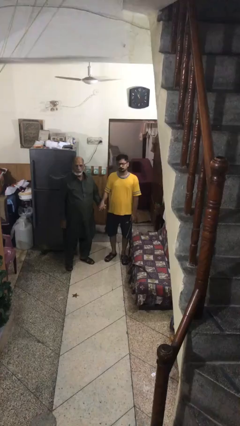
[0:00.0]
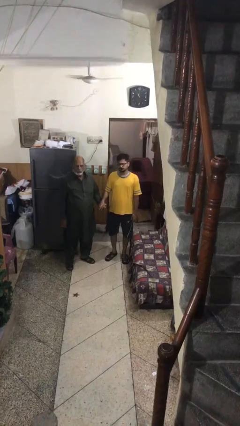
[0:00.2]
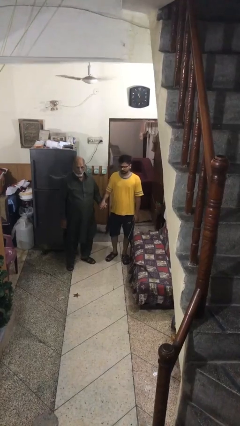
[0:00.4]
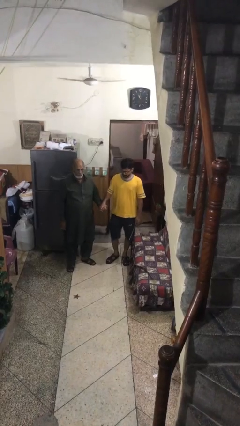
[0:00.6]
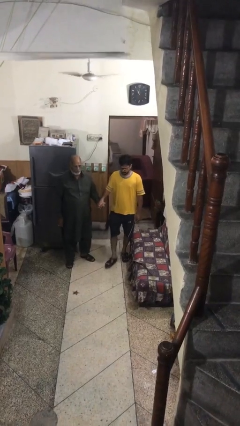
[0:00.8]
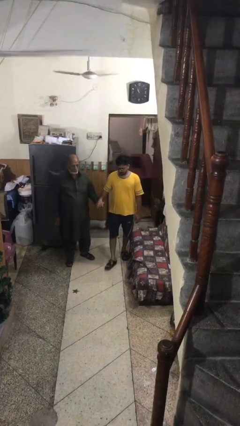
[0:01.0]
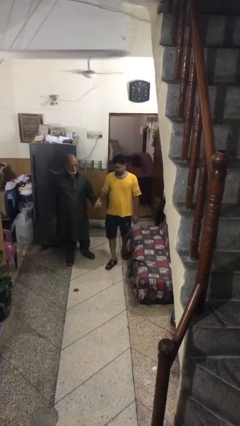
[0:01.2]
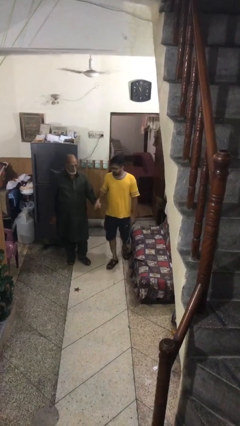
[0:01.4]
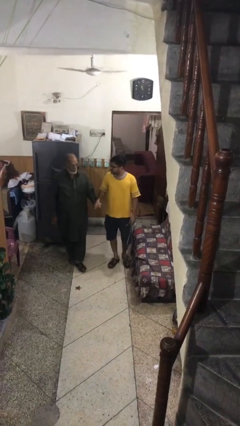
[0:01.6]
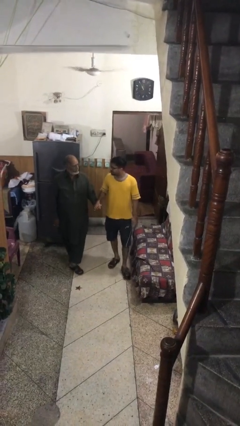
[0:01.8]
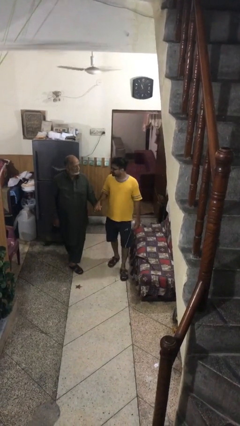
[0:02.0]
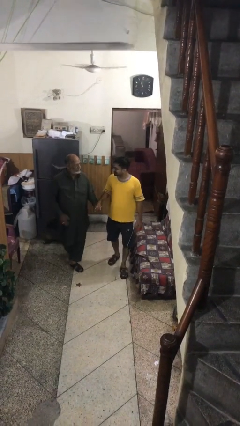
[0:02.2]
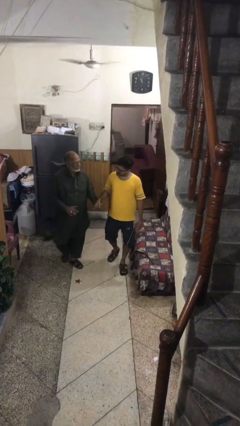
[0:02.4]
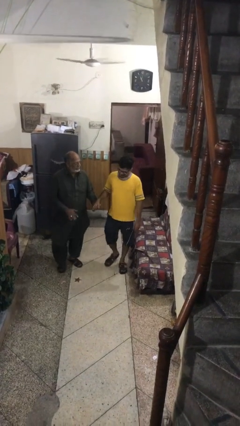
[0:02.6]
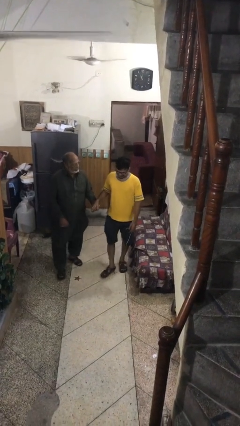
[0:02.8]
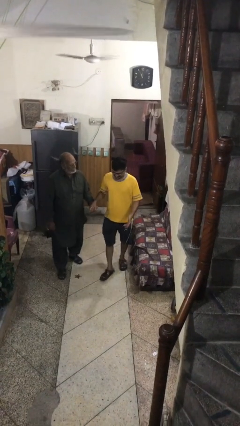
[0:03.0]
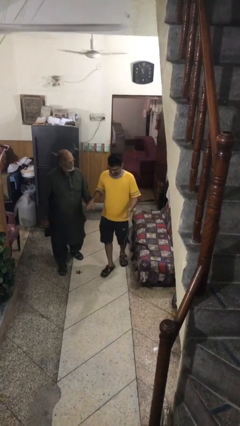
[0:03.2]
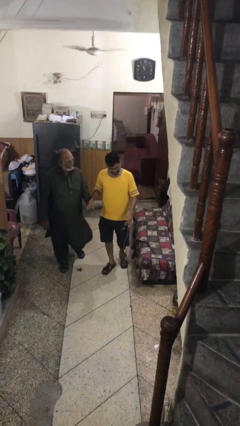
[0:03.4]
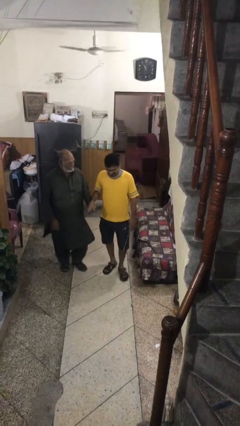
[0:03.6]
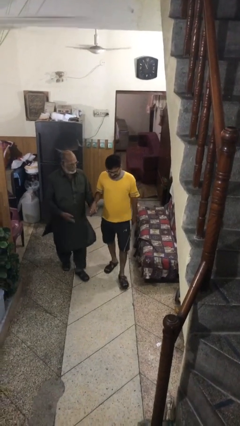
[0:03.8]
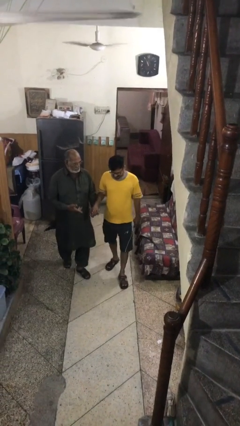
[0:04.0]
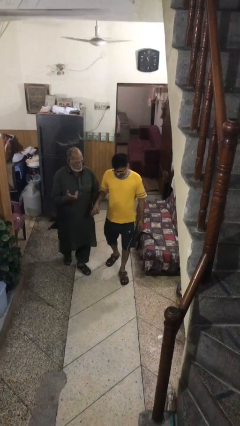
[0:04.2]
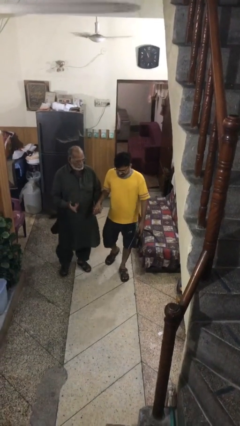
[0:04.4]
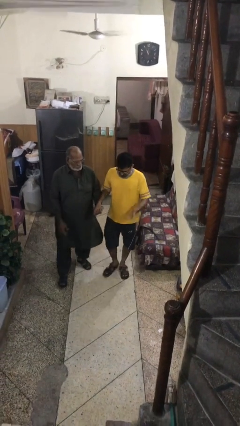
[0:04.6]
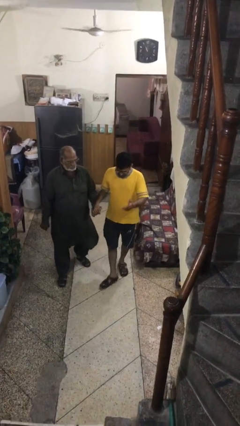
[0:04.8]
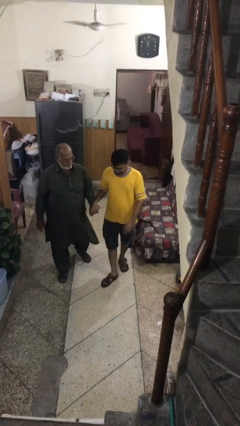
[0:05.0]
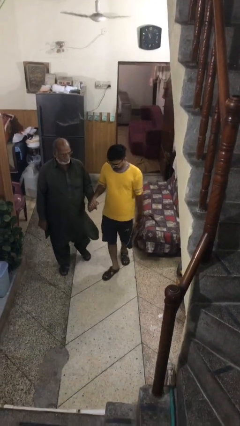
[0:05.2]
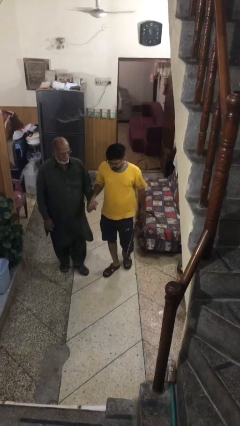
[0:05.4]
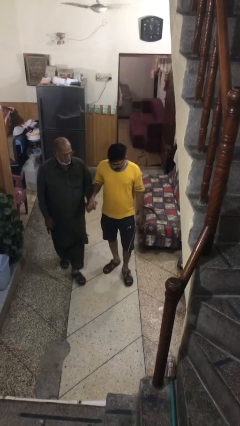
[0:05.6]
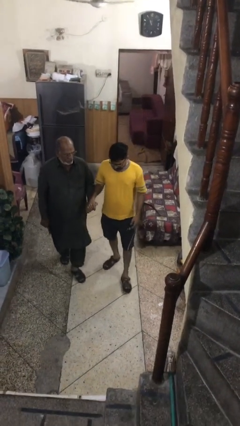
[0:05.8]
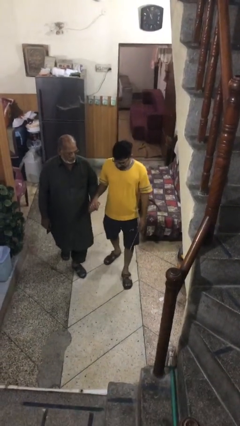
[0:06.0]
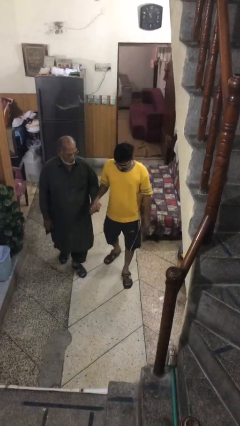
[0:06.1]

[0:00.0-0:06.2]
person holds hand

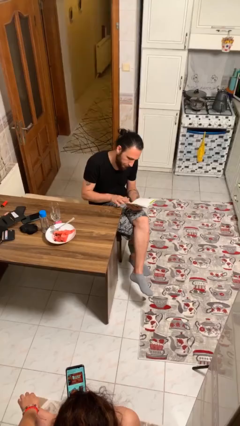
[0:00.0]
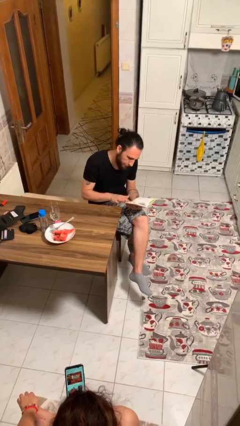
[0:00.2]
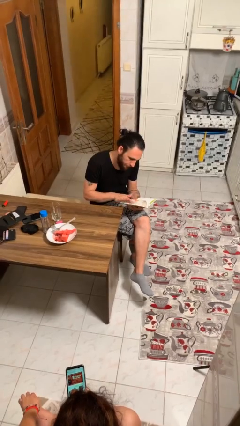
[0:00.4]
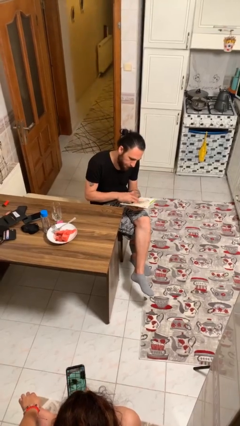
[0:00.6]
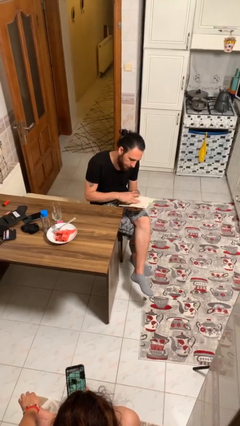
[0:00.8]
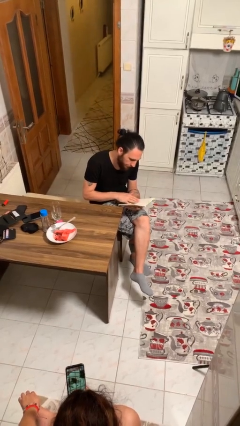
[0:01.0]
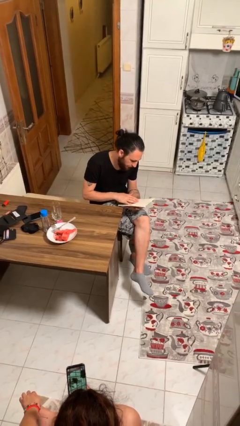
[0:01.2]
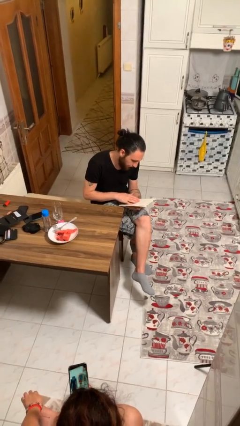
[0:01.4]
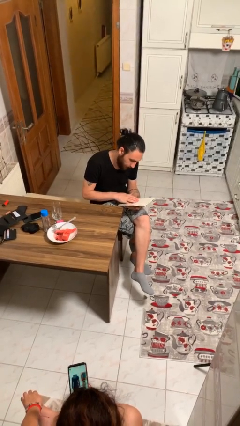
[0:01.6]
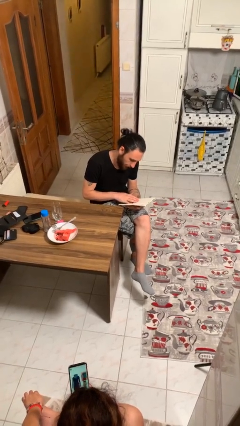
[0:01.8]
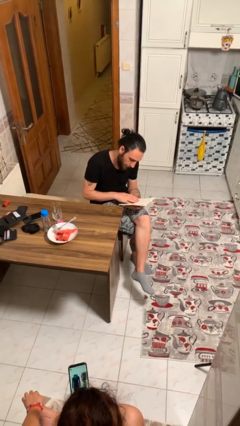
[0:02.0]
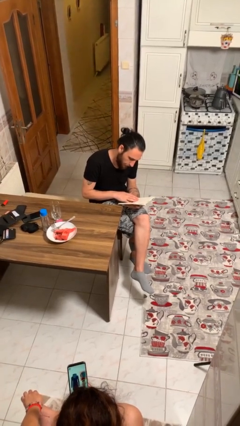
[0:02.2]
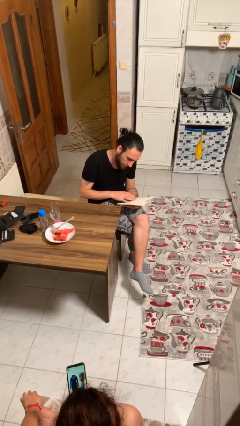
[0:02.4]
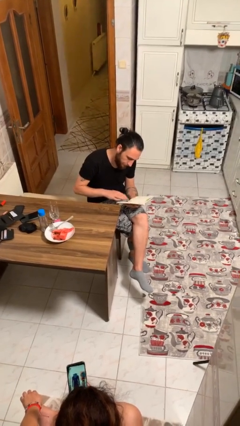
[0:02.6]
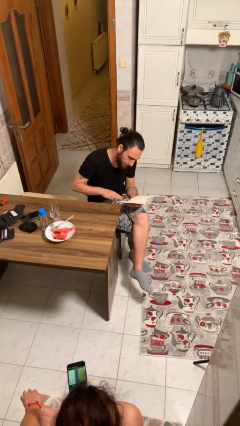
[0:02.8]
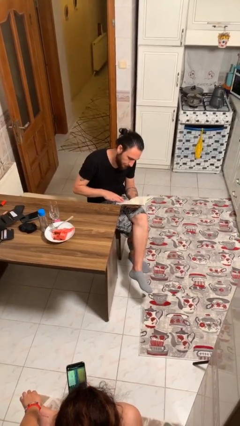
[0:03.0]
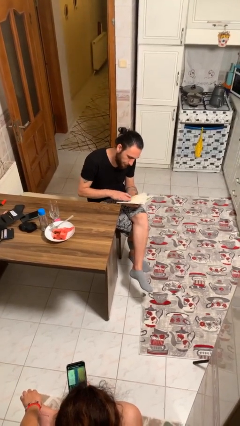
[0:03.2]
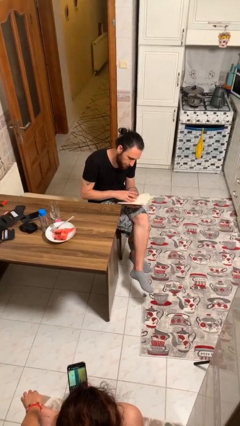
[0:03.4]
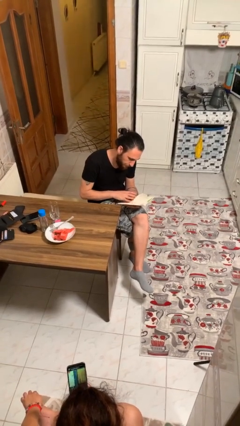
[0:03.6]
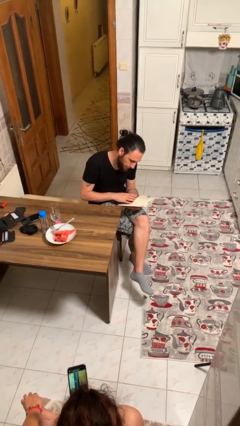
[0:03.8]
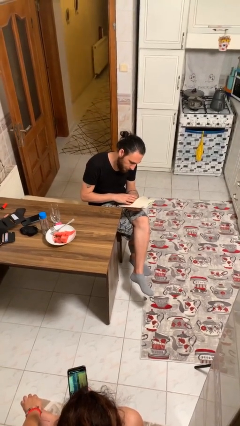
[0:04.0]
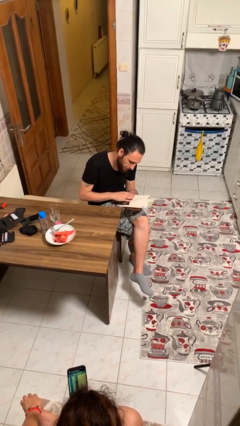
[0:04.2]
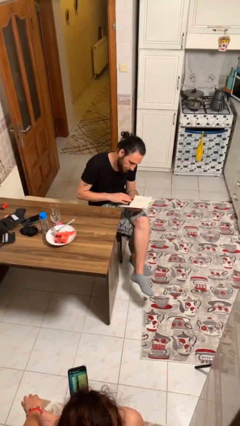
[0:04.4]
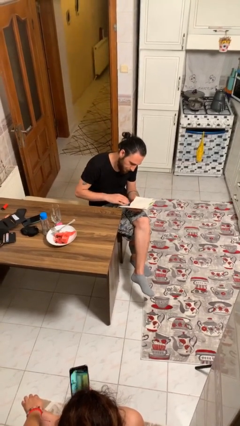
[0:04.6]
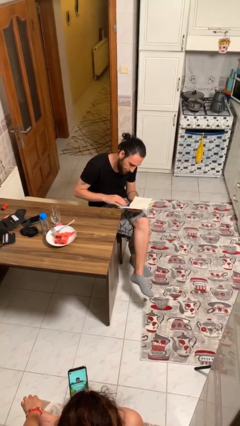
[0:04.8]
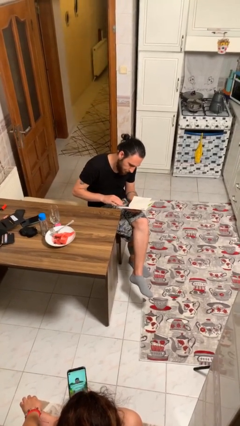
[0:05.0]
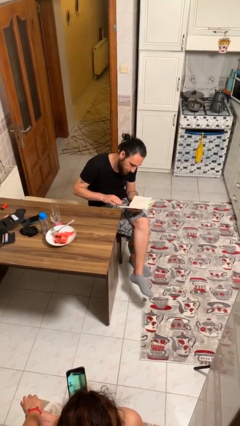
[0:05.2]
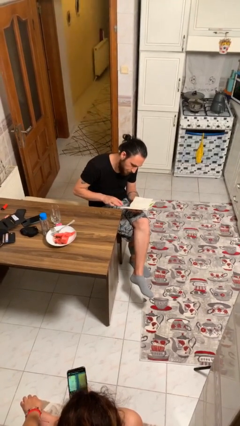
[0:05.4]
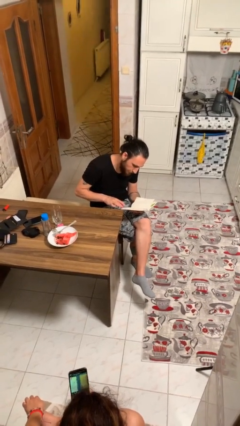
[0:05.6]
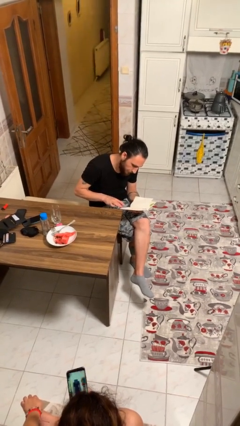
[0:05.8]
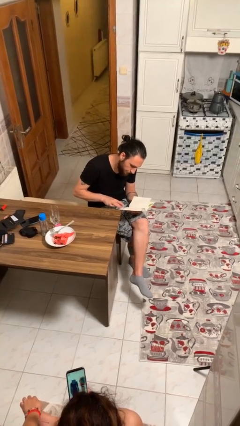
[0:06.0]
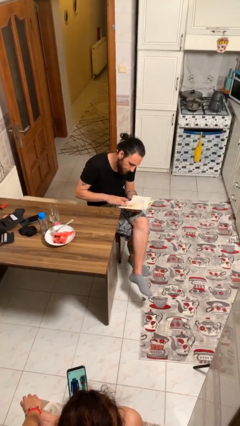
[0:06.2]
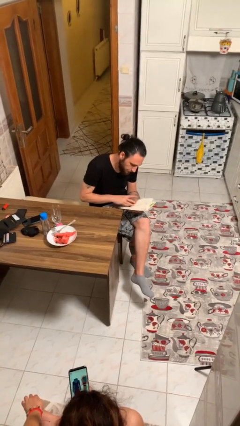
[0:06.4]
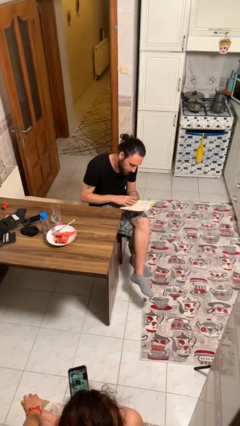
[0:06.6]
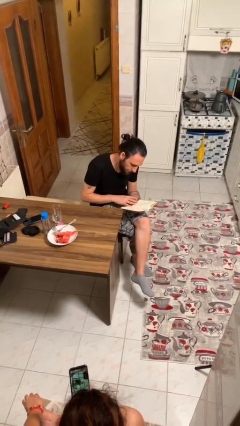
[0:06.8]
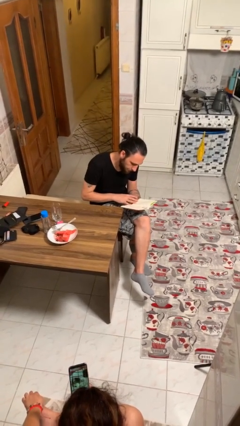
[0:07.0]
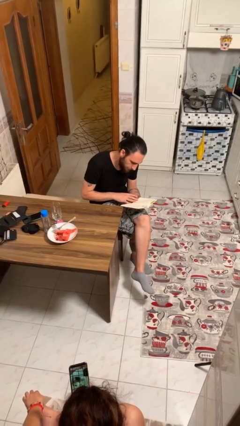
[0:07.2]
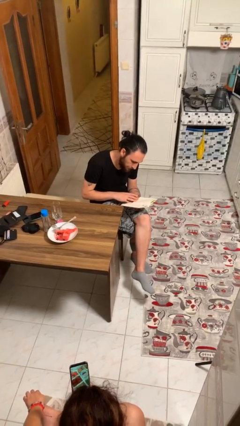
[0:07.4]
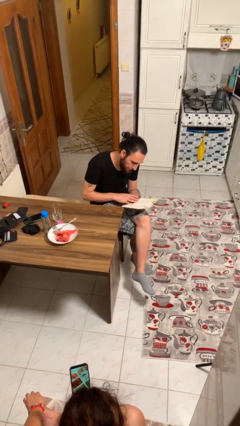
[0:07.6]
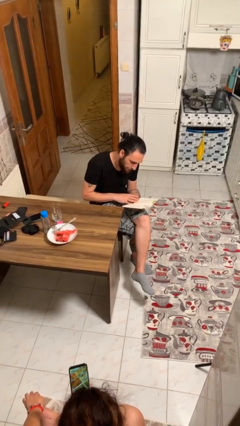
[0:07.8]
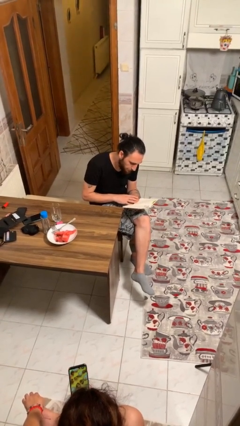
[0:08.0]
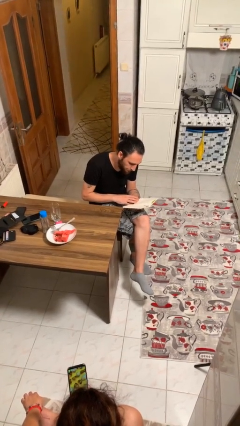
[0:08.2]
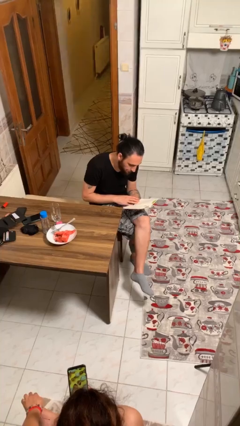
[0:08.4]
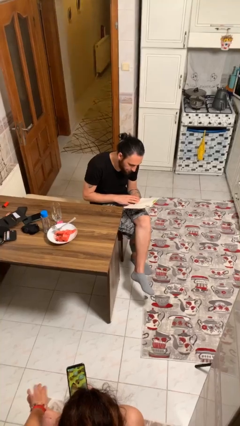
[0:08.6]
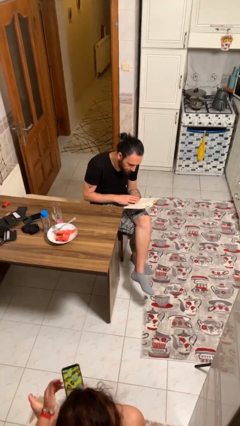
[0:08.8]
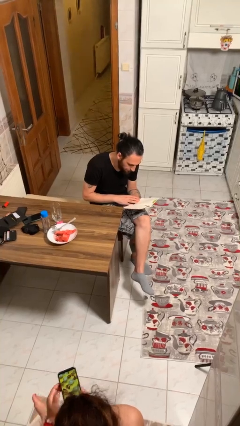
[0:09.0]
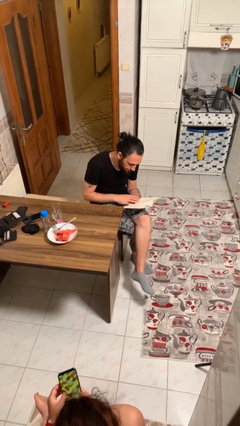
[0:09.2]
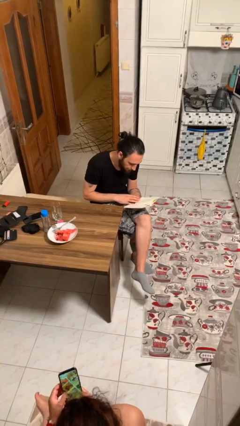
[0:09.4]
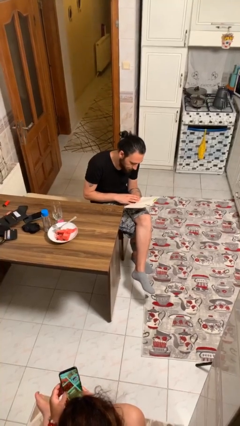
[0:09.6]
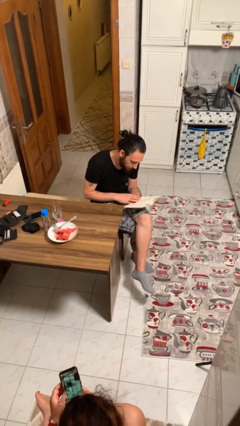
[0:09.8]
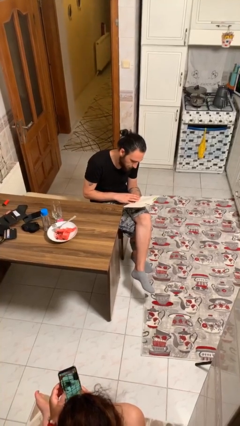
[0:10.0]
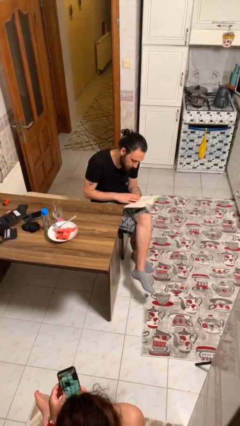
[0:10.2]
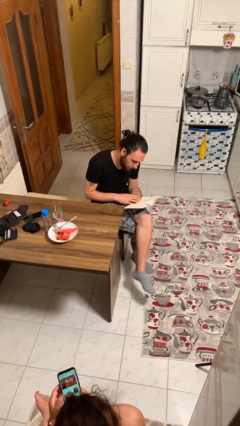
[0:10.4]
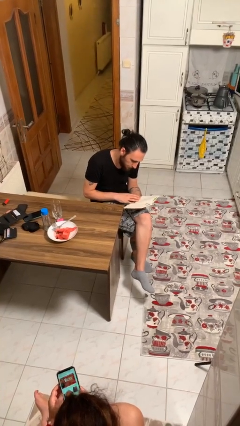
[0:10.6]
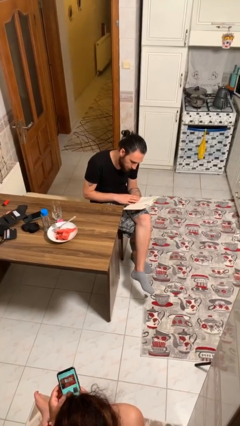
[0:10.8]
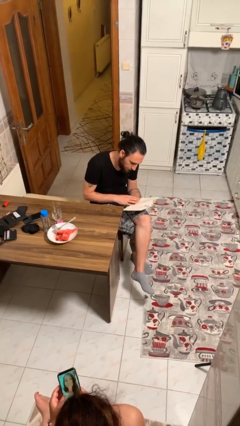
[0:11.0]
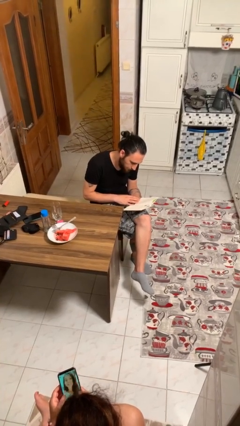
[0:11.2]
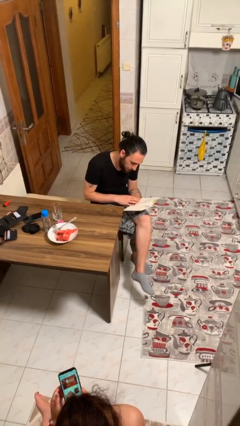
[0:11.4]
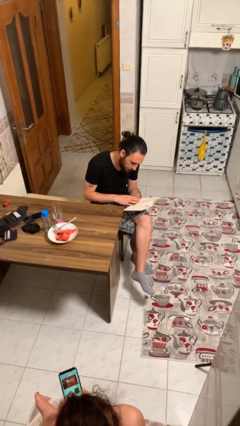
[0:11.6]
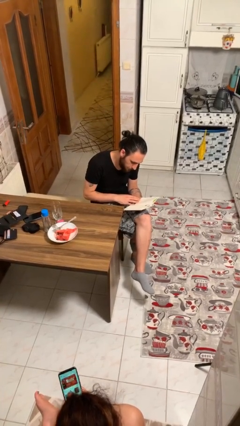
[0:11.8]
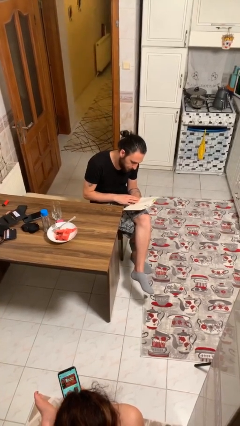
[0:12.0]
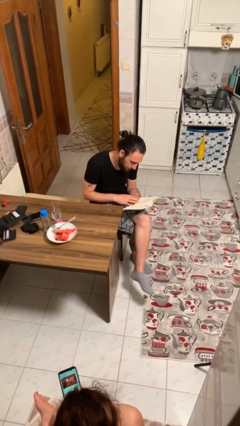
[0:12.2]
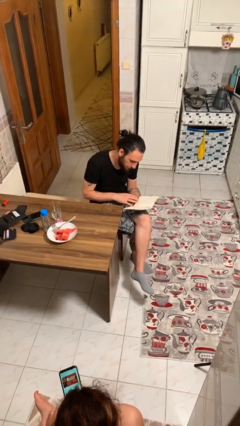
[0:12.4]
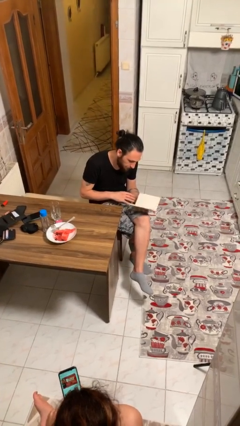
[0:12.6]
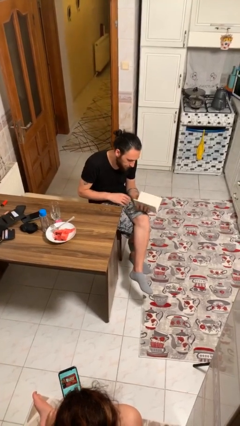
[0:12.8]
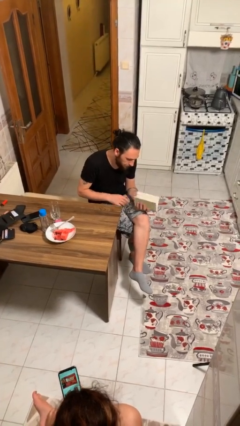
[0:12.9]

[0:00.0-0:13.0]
person reads document
